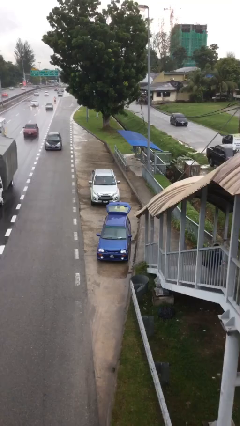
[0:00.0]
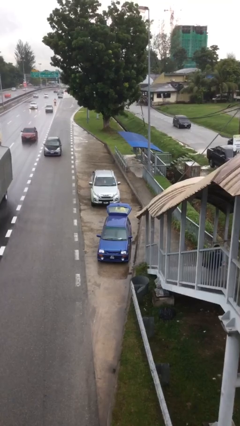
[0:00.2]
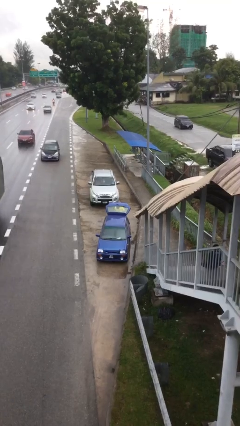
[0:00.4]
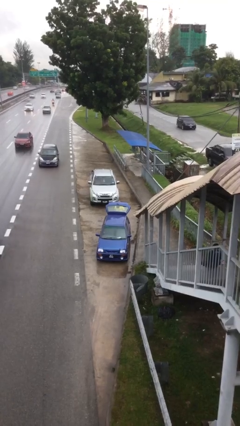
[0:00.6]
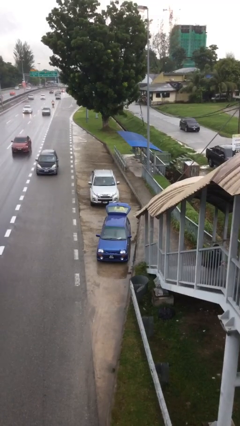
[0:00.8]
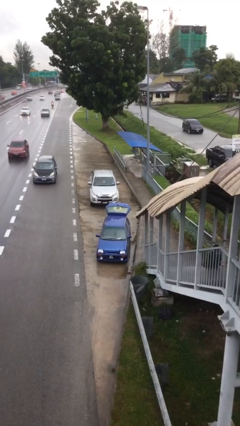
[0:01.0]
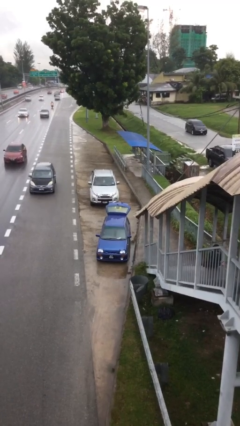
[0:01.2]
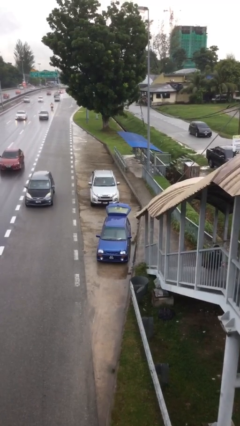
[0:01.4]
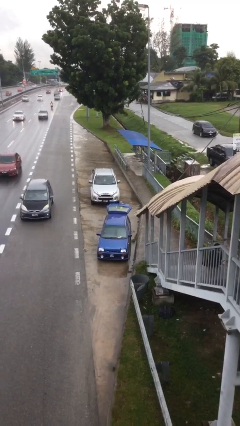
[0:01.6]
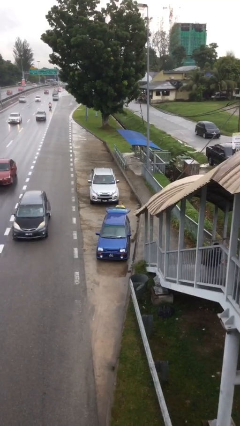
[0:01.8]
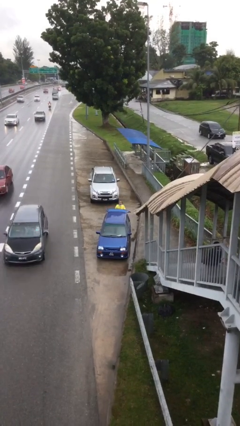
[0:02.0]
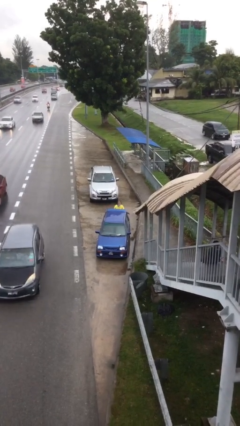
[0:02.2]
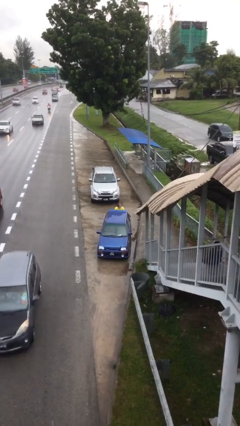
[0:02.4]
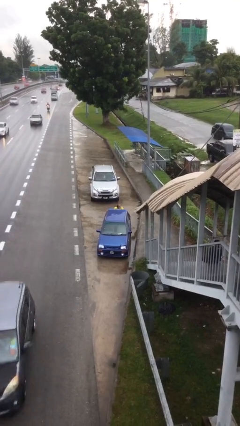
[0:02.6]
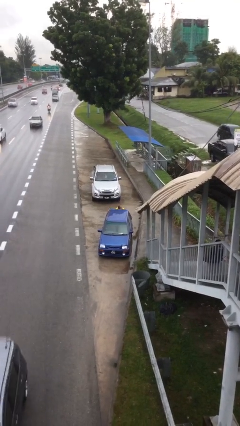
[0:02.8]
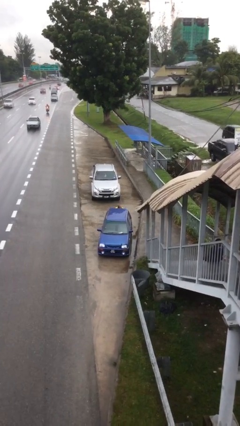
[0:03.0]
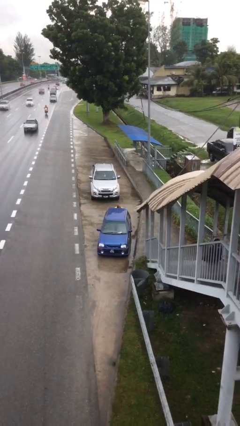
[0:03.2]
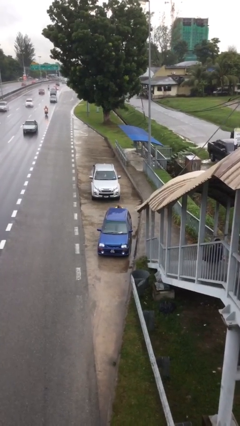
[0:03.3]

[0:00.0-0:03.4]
person closes car trunk

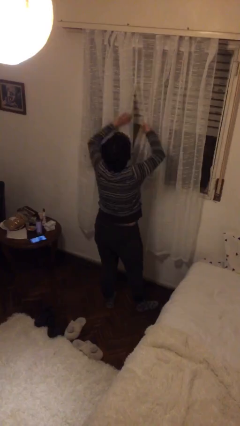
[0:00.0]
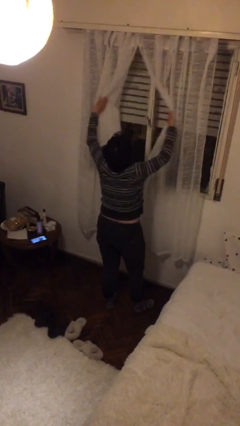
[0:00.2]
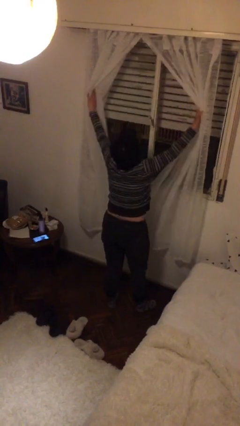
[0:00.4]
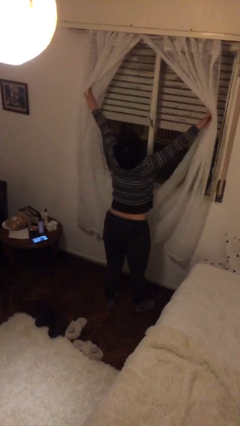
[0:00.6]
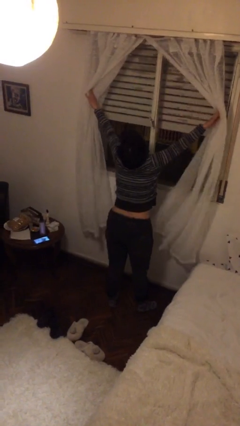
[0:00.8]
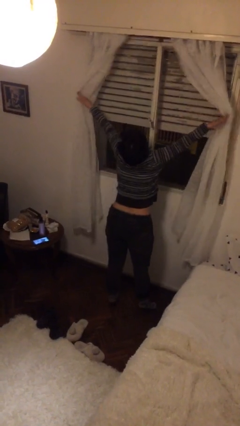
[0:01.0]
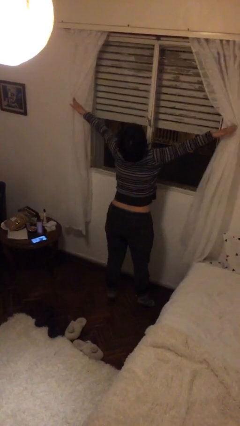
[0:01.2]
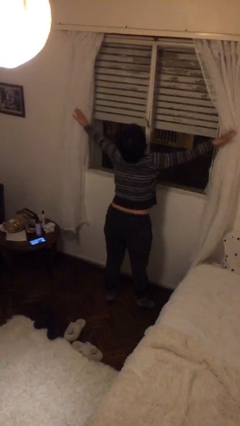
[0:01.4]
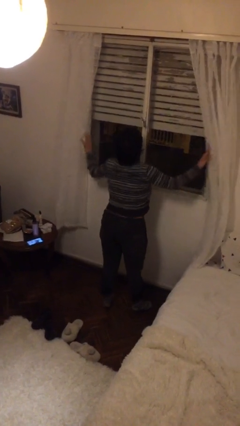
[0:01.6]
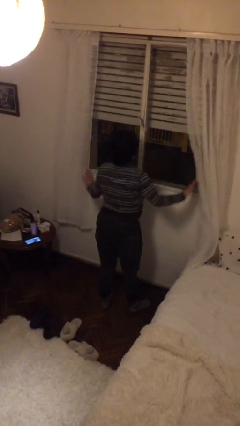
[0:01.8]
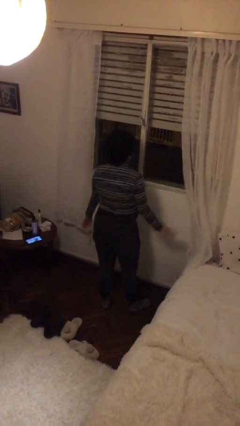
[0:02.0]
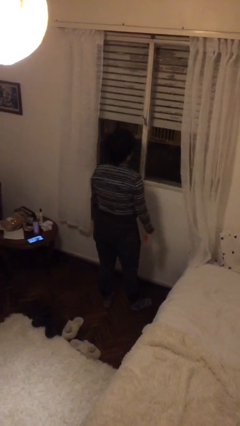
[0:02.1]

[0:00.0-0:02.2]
person opens curtains

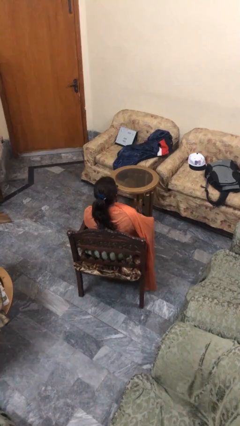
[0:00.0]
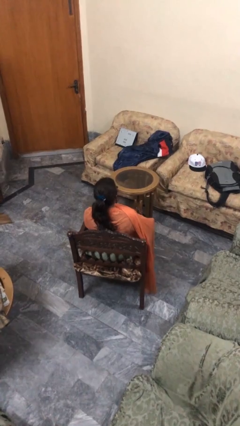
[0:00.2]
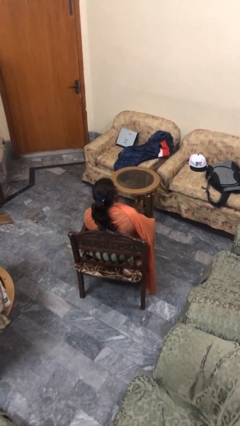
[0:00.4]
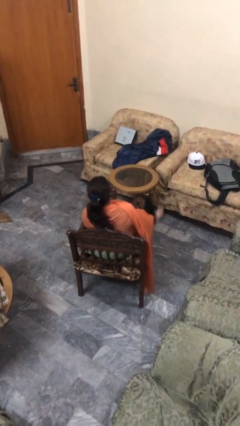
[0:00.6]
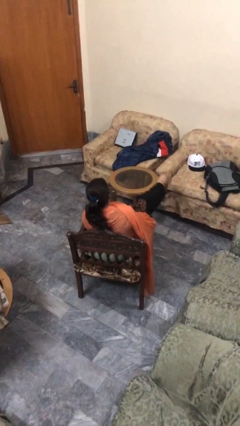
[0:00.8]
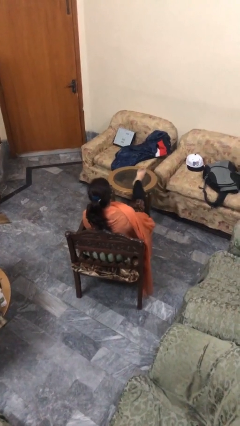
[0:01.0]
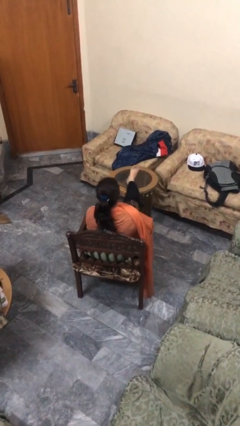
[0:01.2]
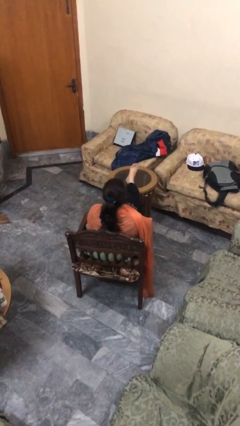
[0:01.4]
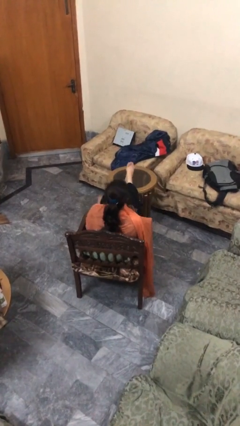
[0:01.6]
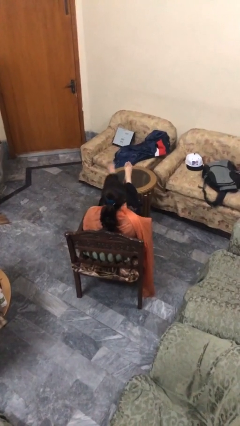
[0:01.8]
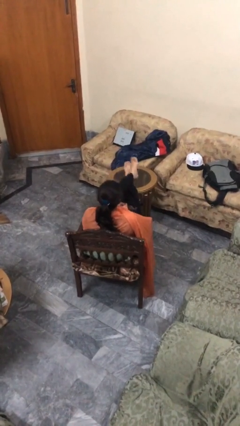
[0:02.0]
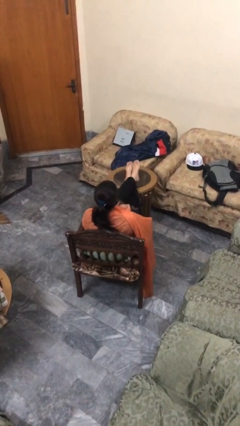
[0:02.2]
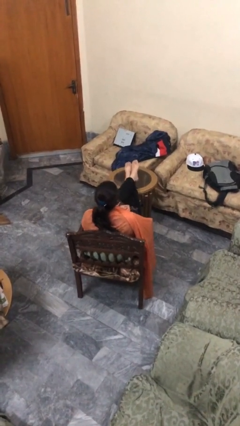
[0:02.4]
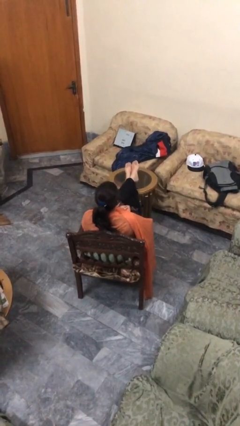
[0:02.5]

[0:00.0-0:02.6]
person puts feet up

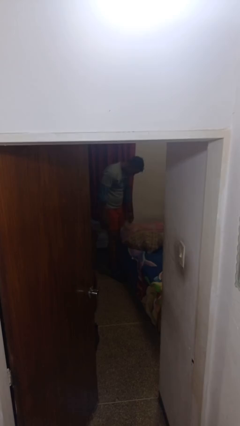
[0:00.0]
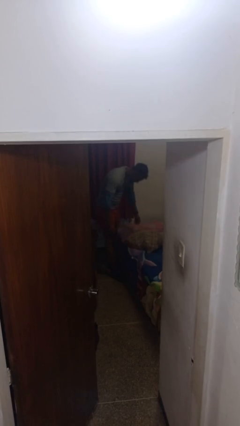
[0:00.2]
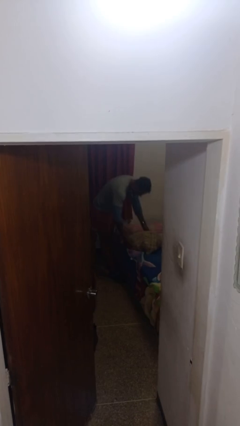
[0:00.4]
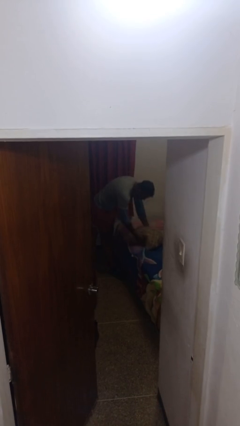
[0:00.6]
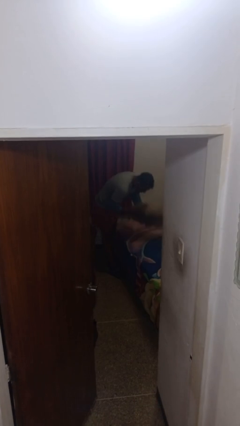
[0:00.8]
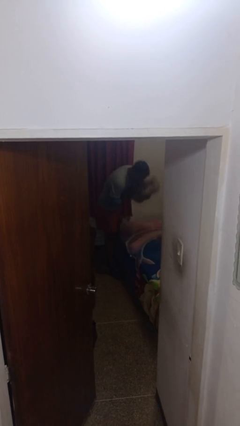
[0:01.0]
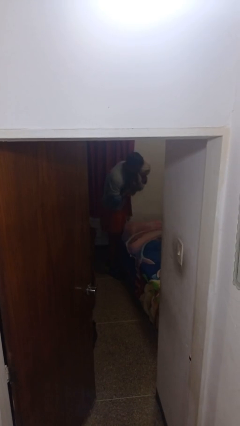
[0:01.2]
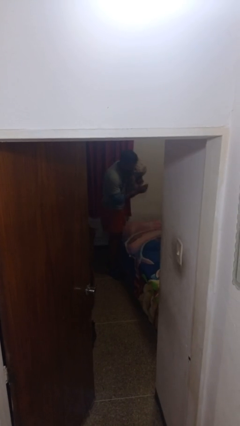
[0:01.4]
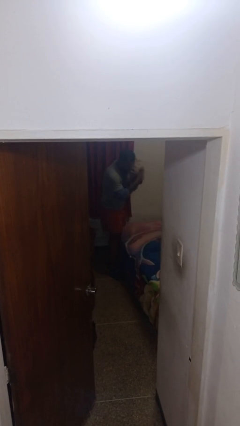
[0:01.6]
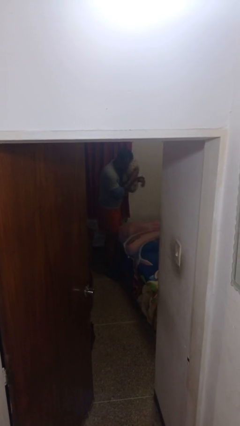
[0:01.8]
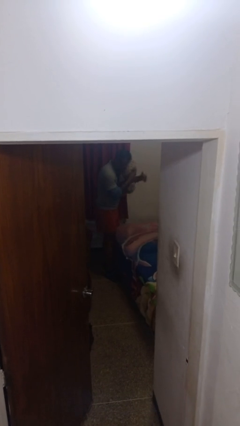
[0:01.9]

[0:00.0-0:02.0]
person picks up object from bed

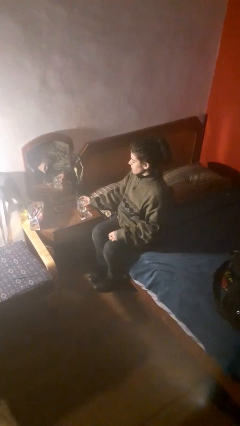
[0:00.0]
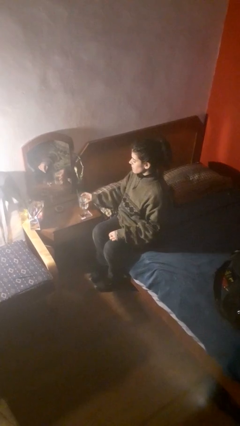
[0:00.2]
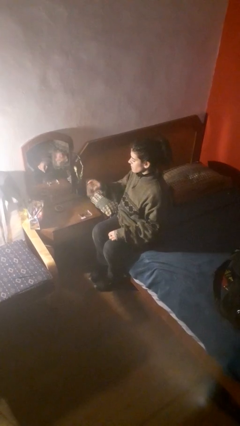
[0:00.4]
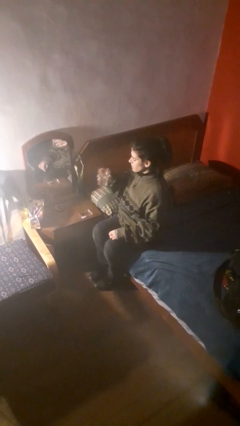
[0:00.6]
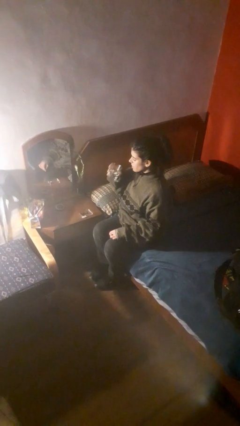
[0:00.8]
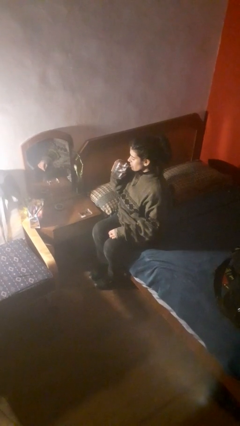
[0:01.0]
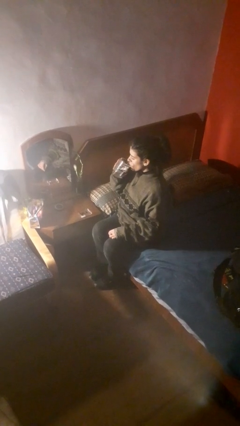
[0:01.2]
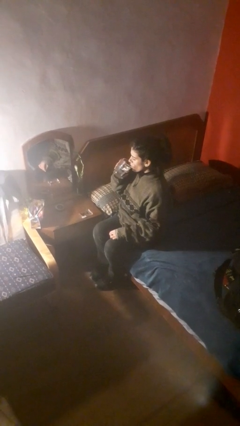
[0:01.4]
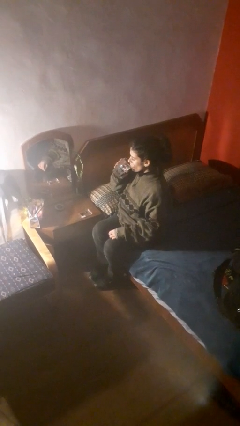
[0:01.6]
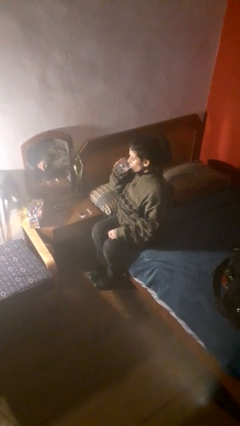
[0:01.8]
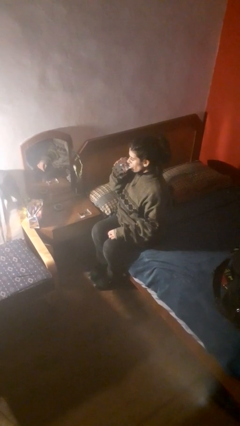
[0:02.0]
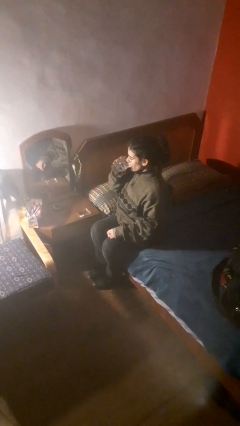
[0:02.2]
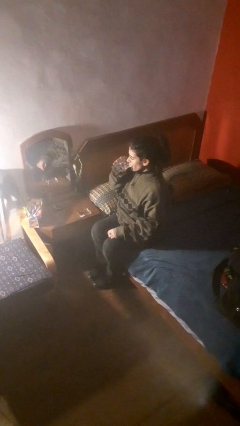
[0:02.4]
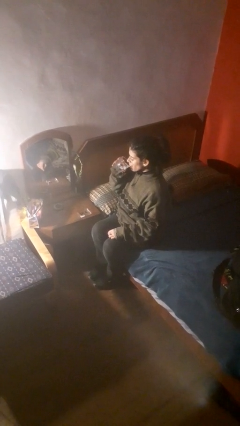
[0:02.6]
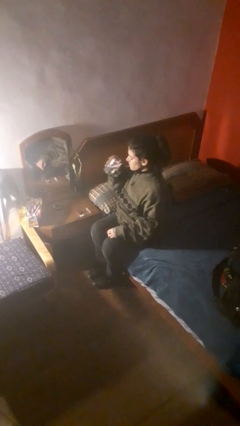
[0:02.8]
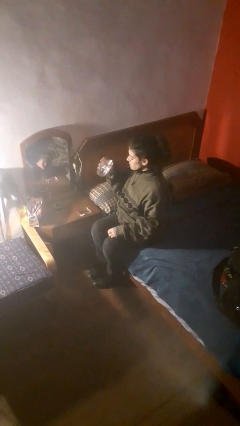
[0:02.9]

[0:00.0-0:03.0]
person drinks from cup

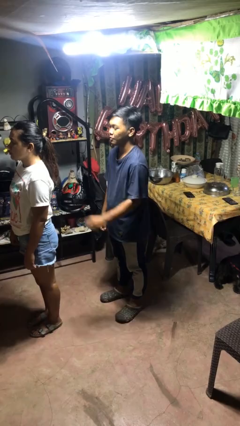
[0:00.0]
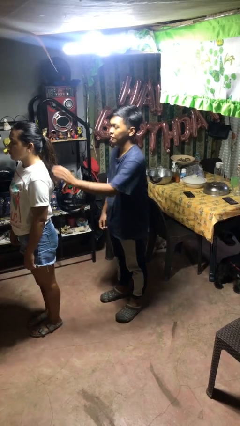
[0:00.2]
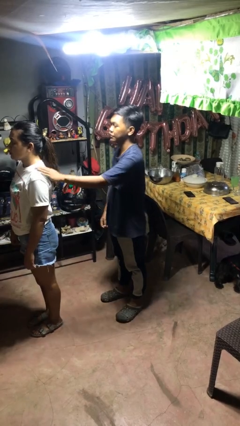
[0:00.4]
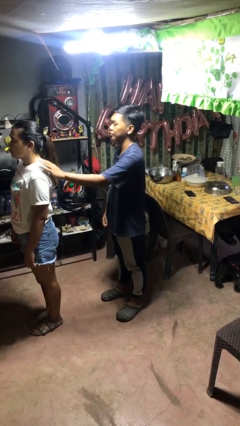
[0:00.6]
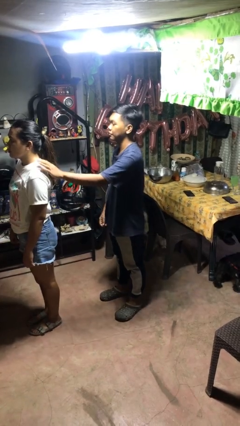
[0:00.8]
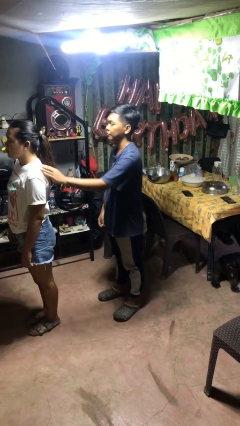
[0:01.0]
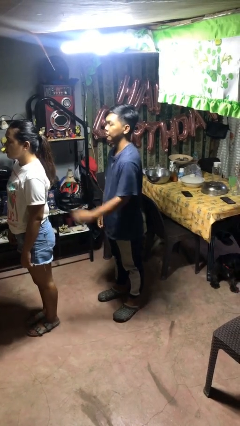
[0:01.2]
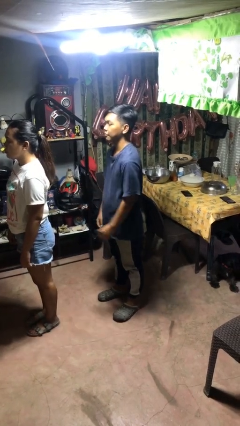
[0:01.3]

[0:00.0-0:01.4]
person pounds shoulders of person

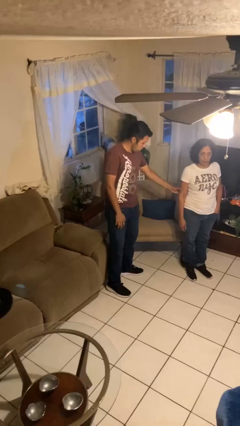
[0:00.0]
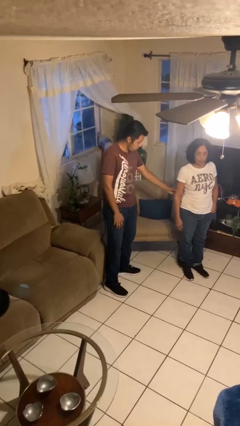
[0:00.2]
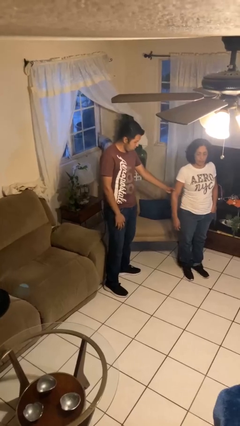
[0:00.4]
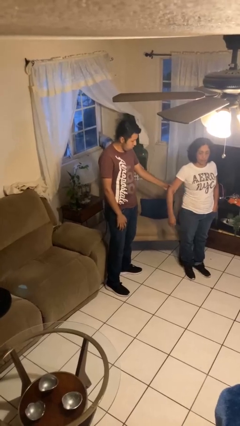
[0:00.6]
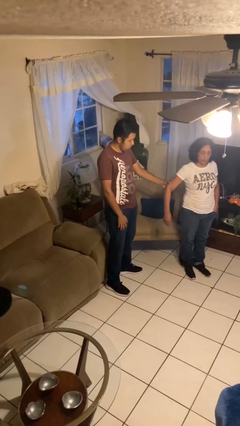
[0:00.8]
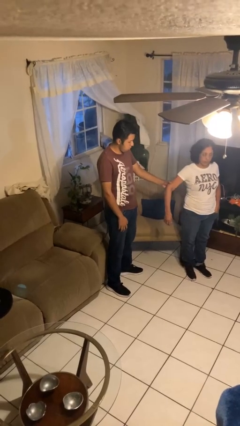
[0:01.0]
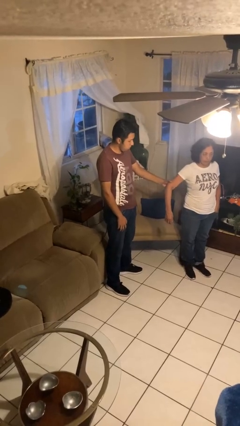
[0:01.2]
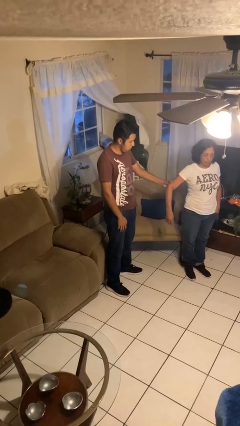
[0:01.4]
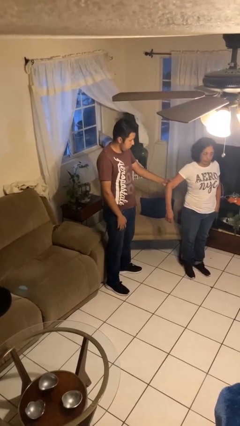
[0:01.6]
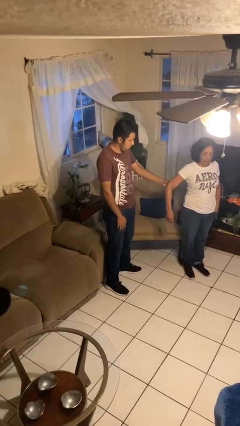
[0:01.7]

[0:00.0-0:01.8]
person grabs person by bicep

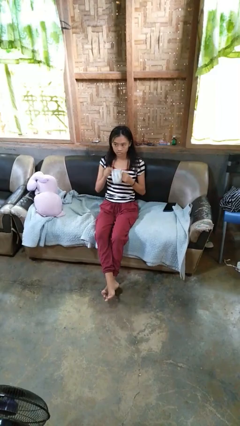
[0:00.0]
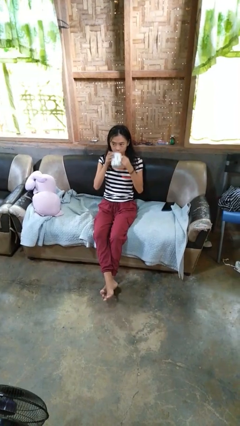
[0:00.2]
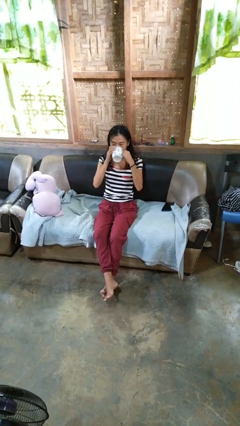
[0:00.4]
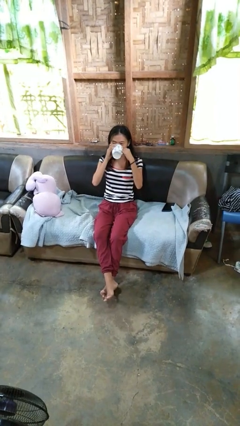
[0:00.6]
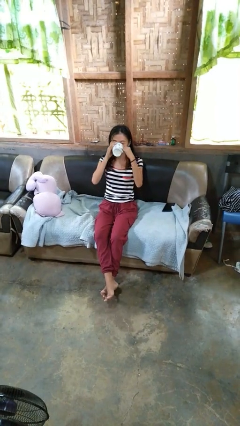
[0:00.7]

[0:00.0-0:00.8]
person drinks from mug

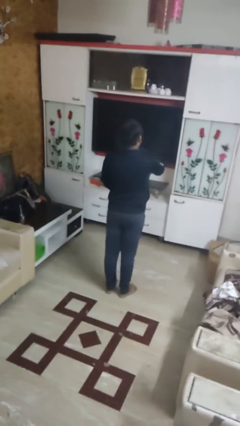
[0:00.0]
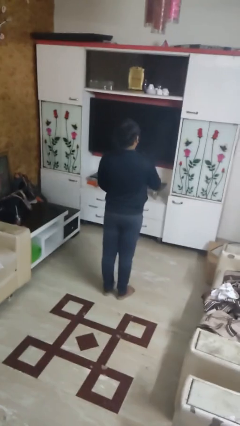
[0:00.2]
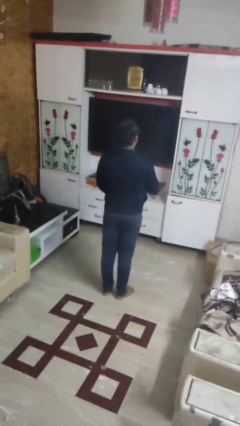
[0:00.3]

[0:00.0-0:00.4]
person zips up jacket
